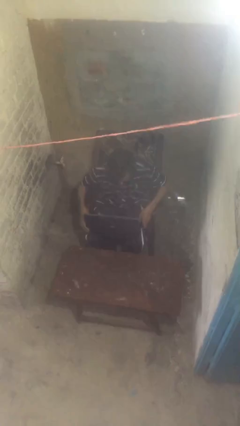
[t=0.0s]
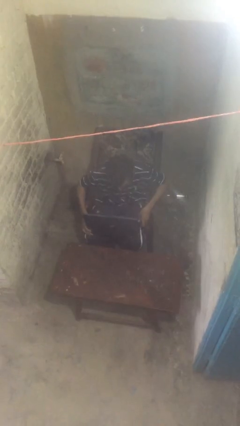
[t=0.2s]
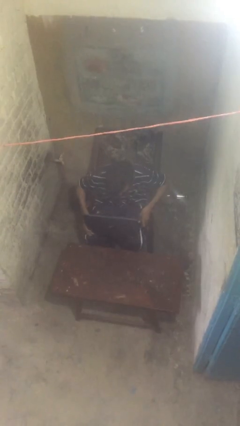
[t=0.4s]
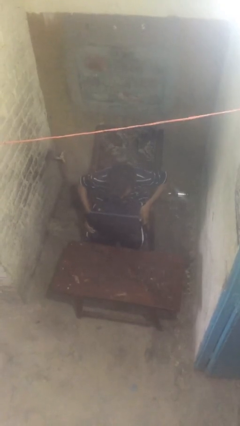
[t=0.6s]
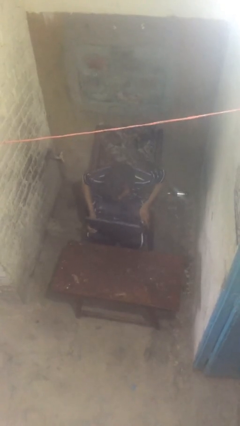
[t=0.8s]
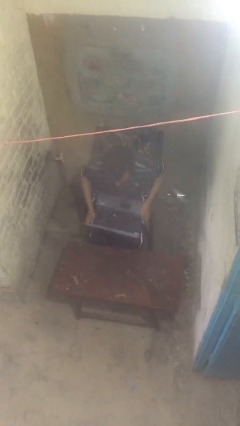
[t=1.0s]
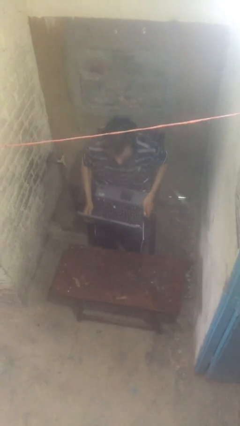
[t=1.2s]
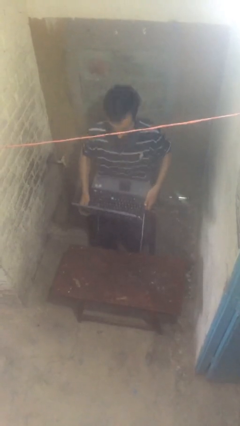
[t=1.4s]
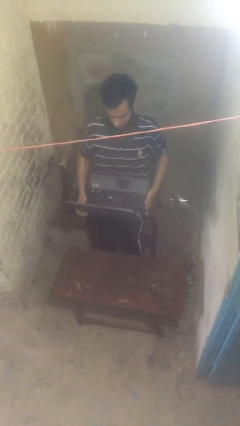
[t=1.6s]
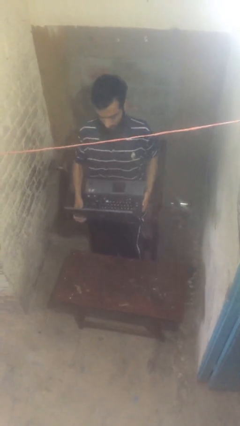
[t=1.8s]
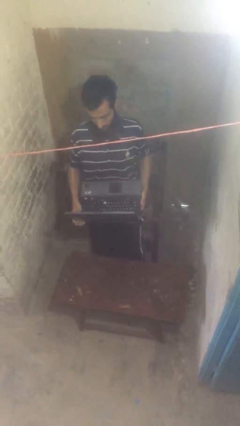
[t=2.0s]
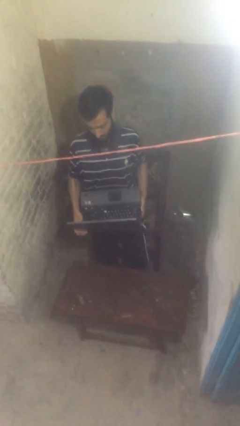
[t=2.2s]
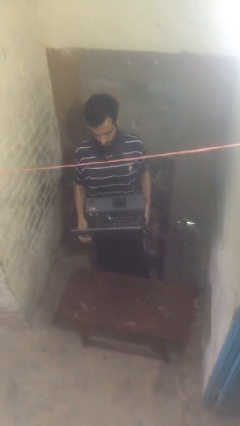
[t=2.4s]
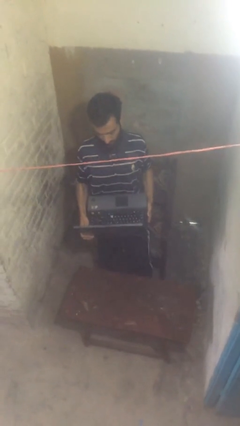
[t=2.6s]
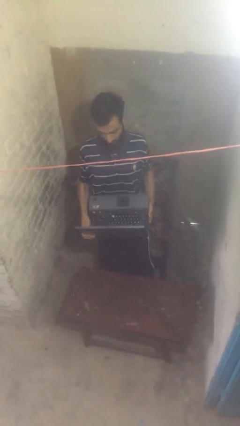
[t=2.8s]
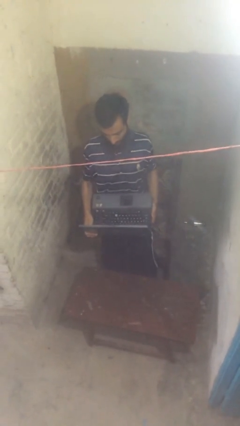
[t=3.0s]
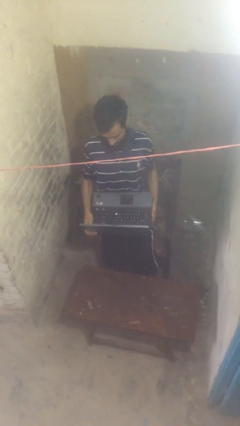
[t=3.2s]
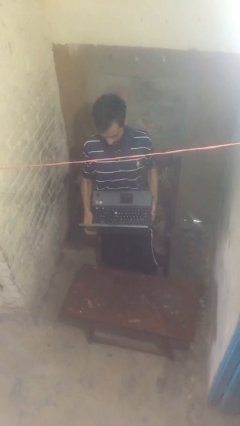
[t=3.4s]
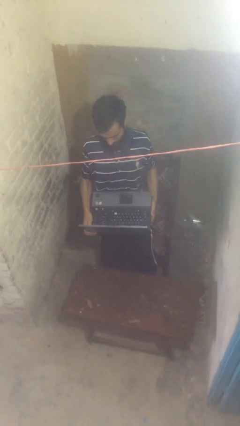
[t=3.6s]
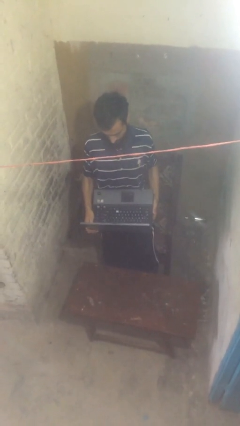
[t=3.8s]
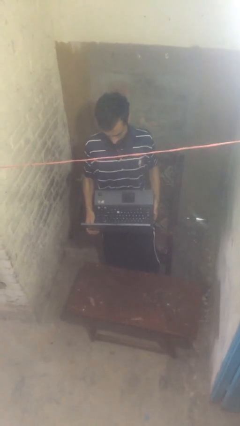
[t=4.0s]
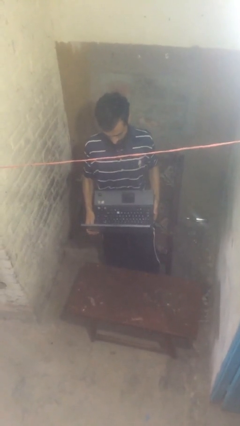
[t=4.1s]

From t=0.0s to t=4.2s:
person stands up

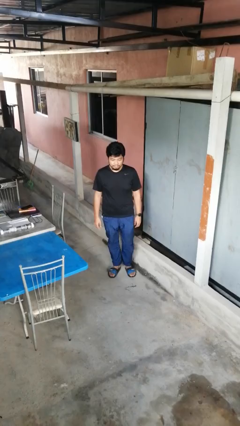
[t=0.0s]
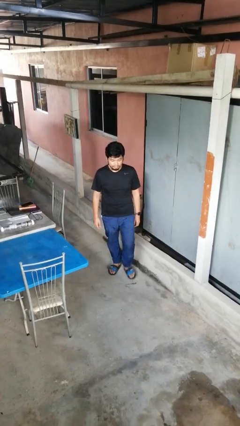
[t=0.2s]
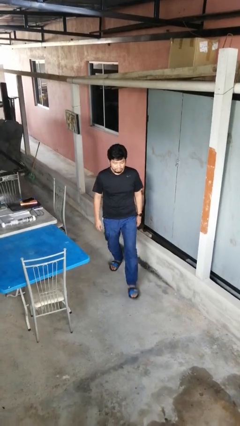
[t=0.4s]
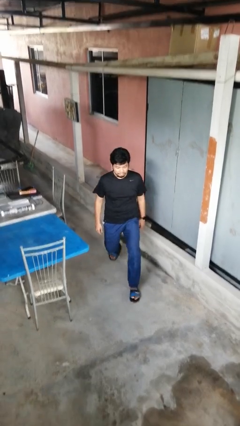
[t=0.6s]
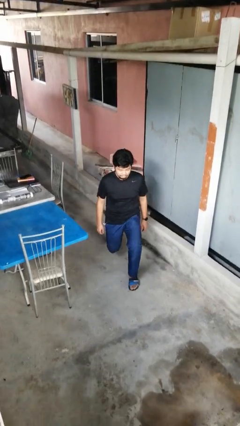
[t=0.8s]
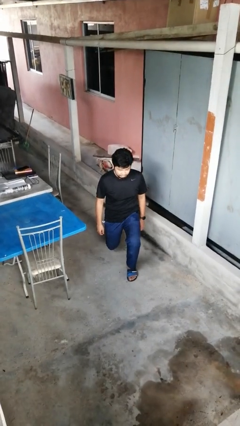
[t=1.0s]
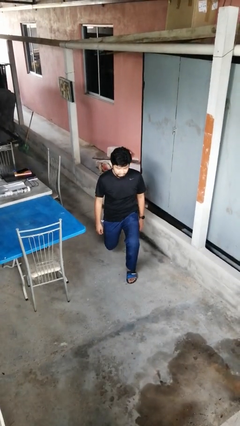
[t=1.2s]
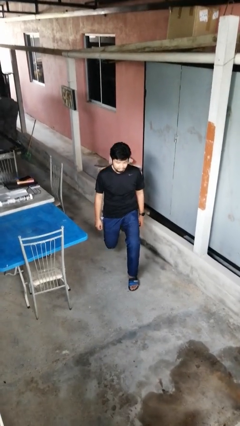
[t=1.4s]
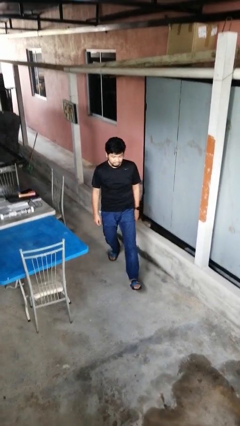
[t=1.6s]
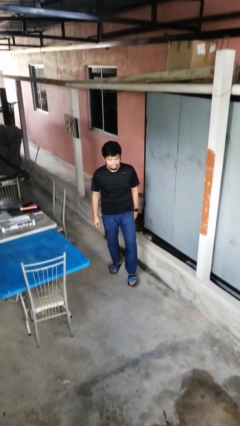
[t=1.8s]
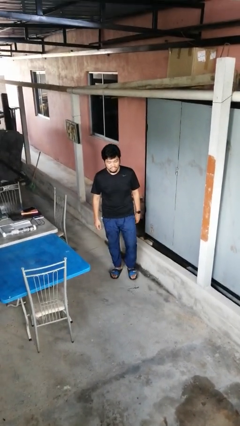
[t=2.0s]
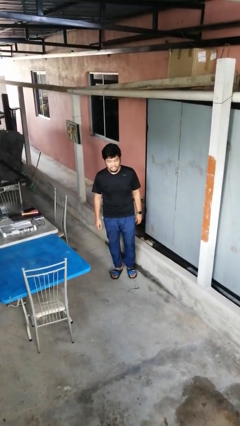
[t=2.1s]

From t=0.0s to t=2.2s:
person exercises with lunges

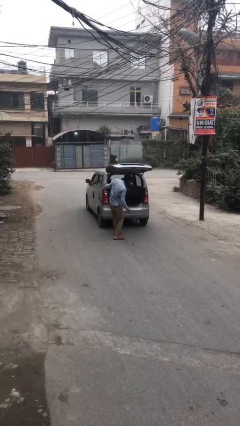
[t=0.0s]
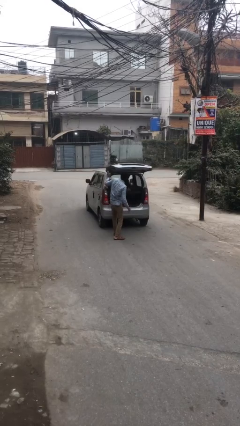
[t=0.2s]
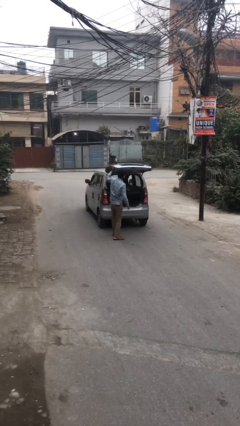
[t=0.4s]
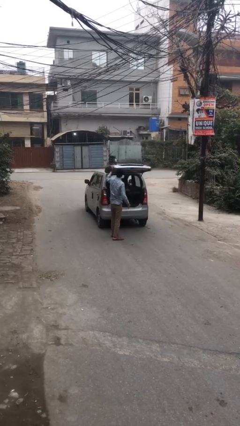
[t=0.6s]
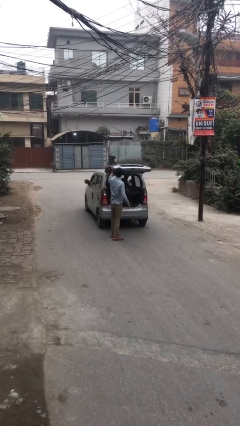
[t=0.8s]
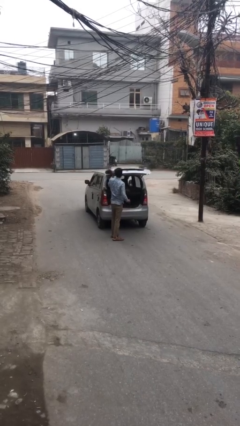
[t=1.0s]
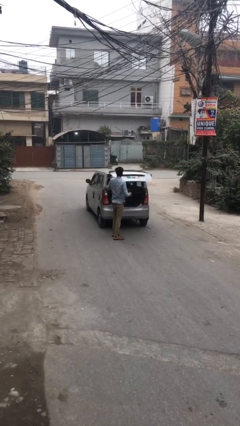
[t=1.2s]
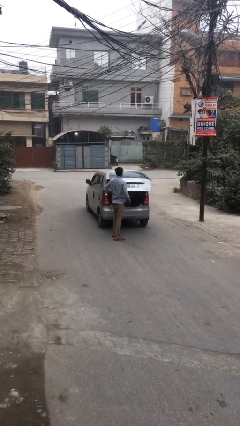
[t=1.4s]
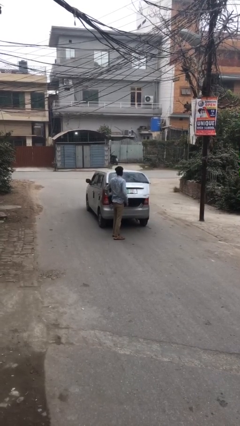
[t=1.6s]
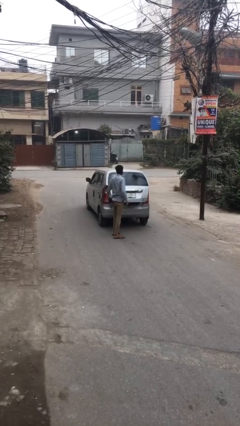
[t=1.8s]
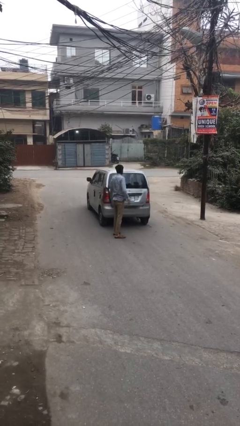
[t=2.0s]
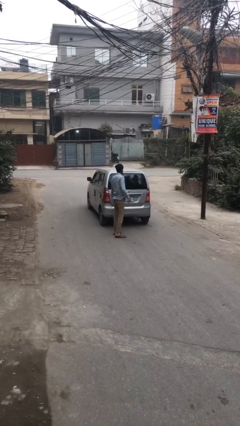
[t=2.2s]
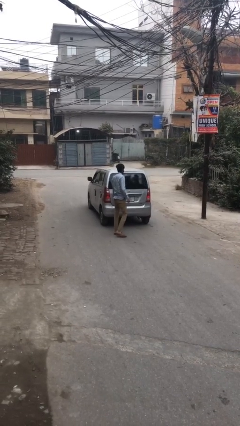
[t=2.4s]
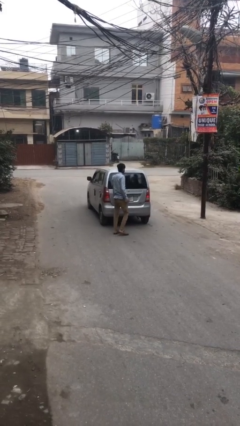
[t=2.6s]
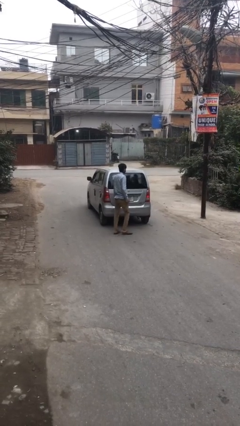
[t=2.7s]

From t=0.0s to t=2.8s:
person closes car trunk

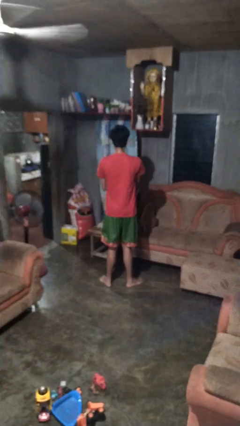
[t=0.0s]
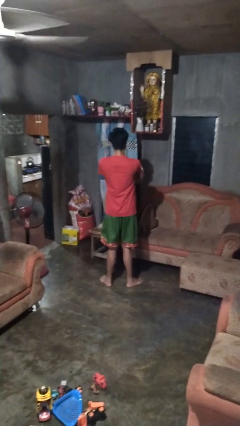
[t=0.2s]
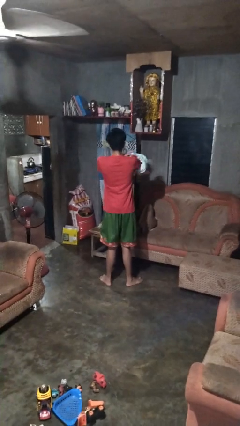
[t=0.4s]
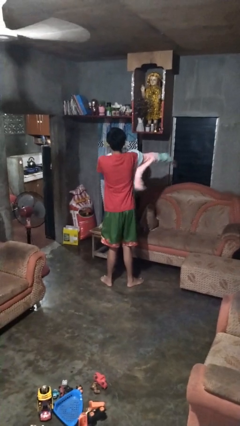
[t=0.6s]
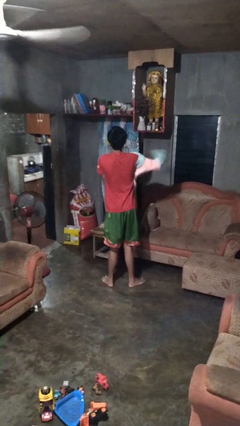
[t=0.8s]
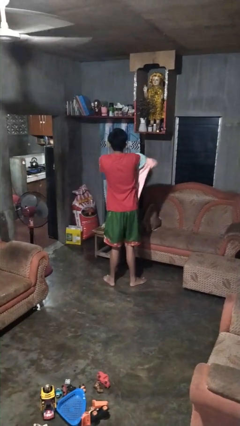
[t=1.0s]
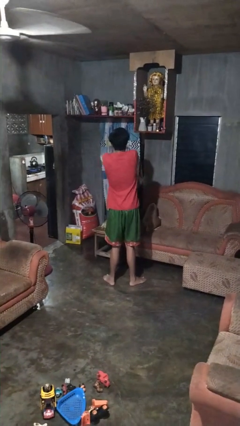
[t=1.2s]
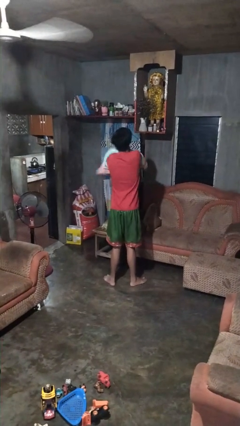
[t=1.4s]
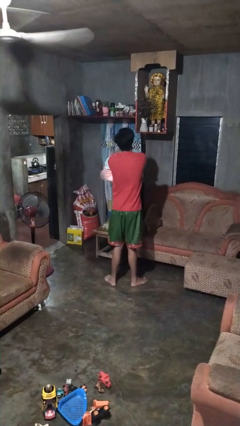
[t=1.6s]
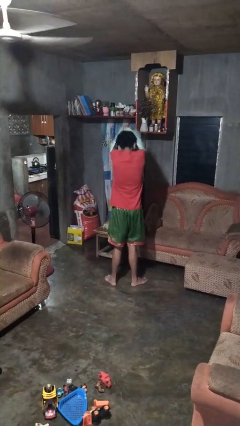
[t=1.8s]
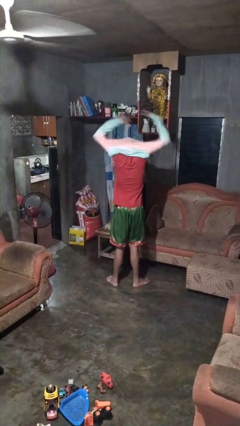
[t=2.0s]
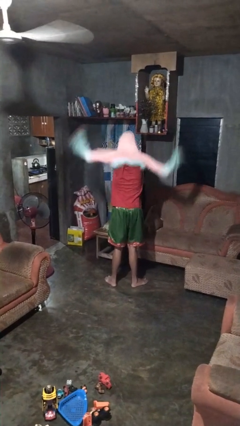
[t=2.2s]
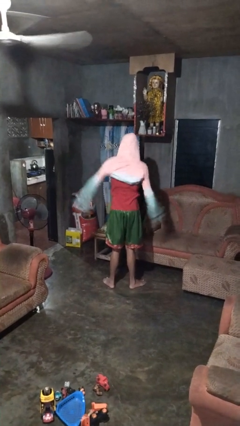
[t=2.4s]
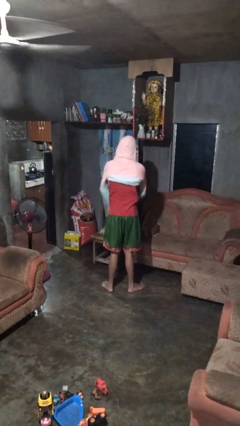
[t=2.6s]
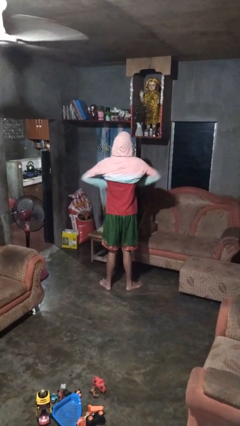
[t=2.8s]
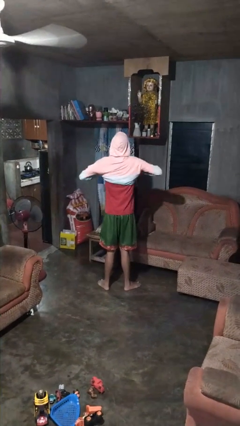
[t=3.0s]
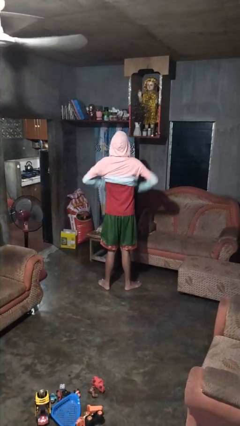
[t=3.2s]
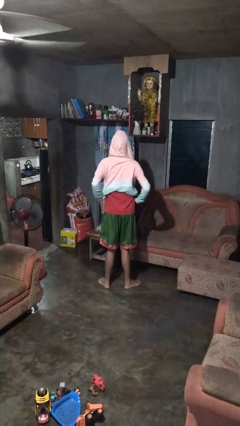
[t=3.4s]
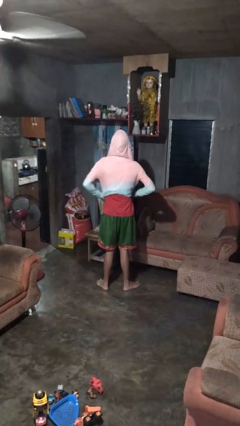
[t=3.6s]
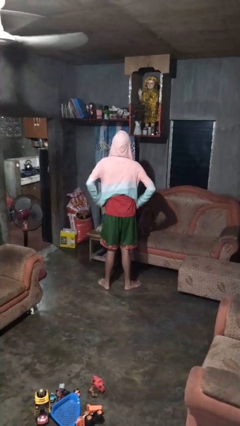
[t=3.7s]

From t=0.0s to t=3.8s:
person puts on hoodie

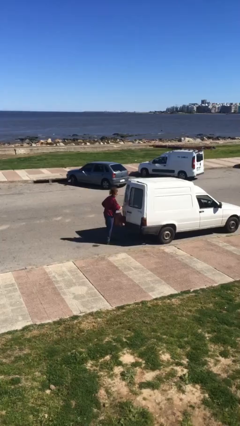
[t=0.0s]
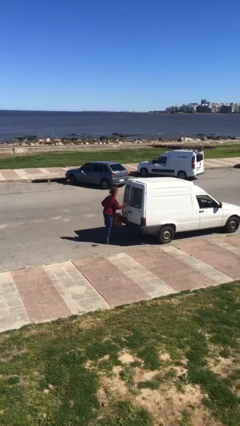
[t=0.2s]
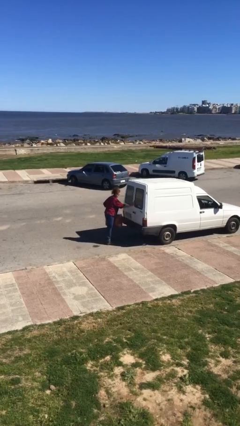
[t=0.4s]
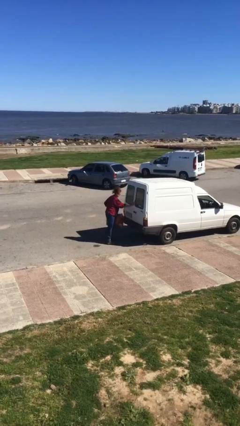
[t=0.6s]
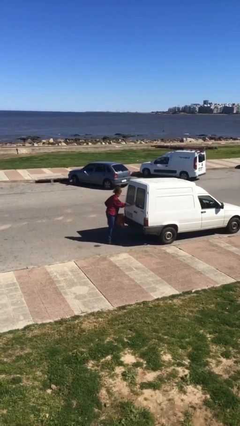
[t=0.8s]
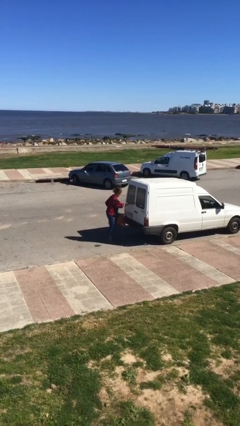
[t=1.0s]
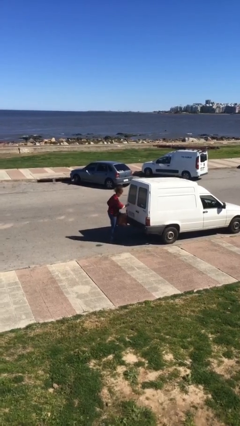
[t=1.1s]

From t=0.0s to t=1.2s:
person closes car door

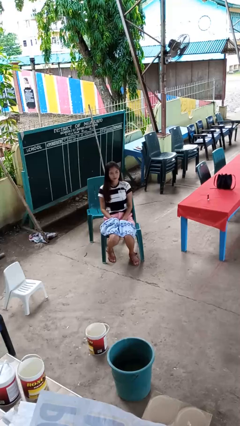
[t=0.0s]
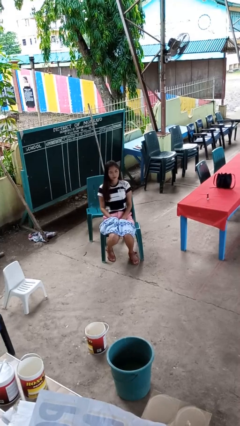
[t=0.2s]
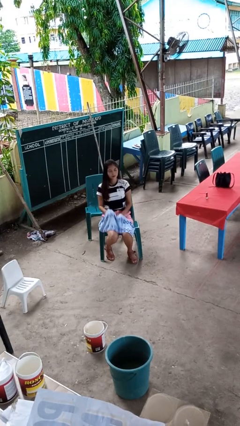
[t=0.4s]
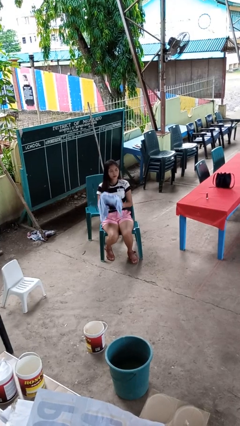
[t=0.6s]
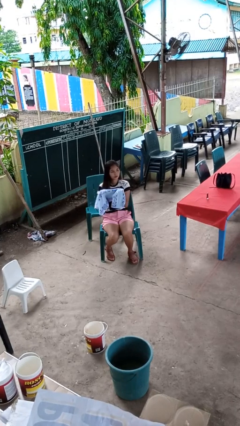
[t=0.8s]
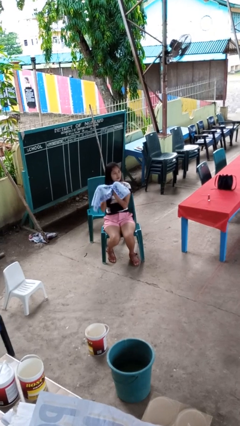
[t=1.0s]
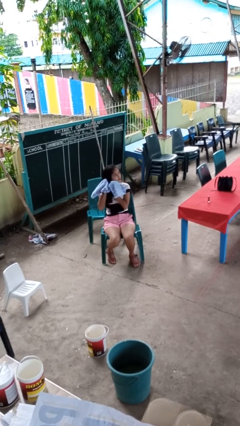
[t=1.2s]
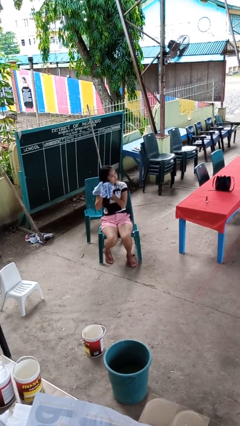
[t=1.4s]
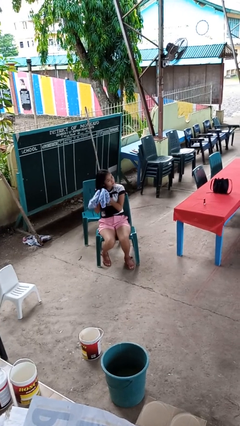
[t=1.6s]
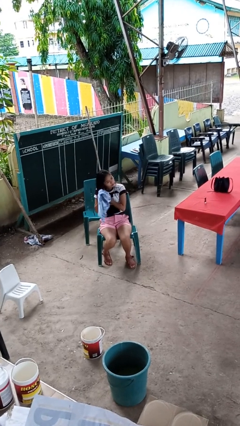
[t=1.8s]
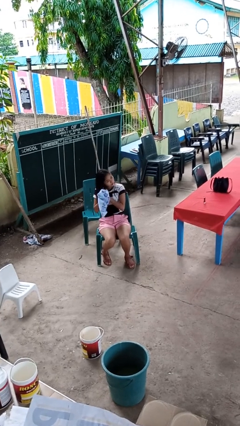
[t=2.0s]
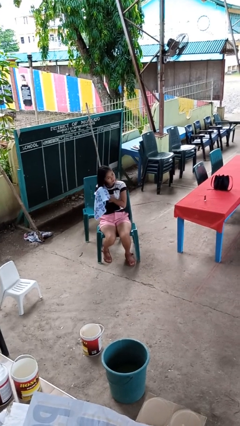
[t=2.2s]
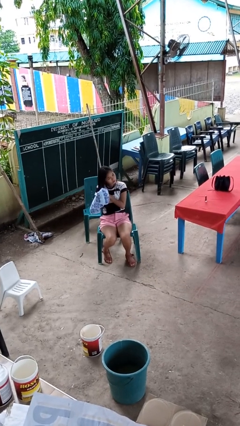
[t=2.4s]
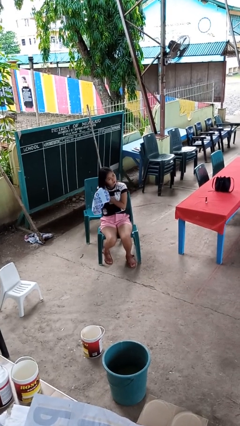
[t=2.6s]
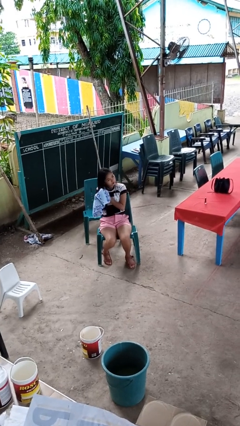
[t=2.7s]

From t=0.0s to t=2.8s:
person dries hair with towel

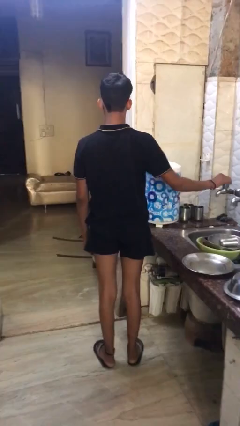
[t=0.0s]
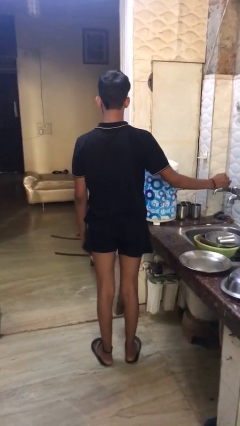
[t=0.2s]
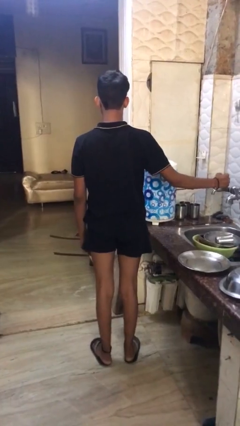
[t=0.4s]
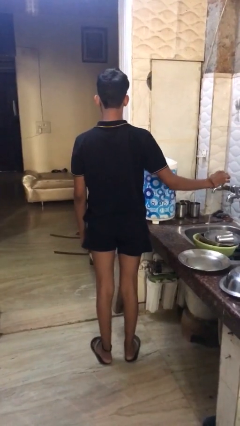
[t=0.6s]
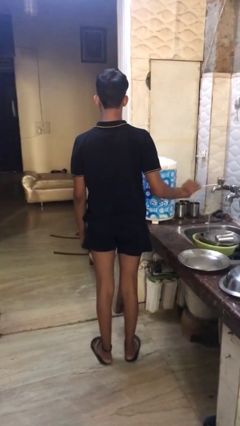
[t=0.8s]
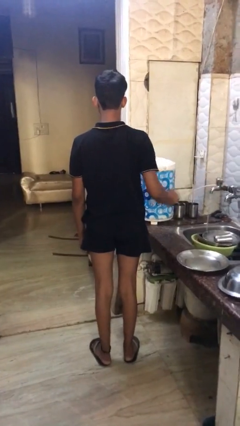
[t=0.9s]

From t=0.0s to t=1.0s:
person turns on faucet
